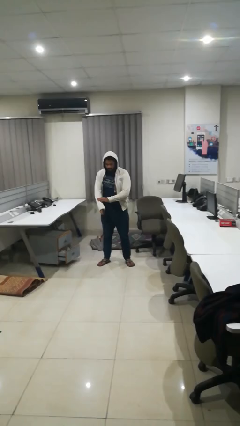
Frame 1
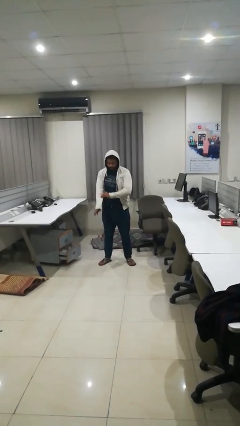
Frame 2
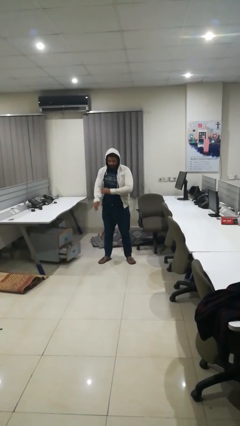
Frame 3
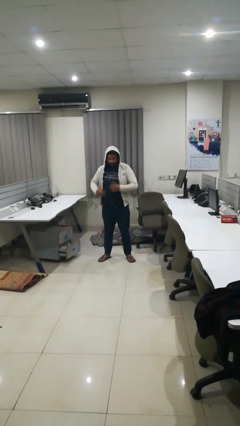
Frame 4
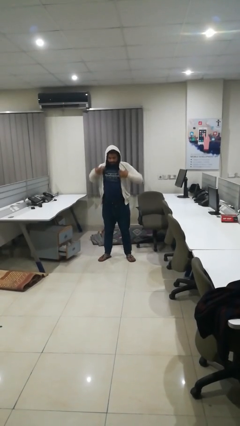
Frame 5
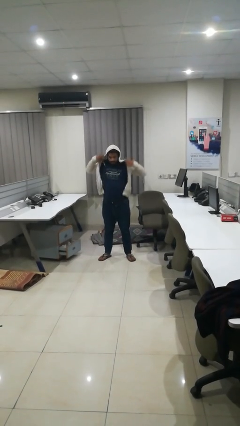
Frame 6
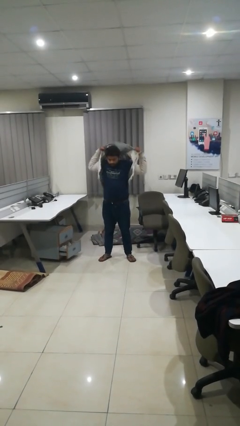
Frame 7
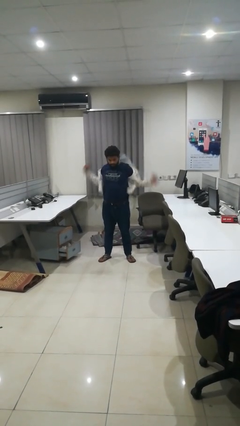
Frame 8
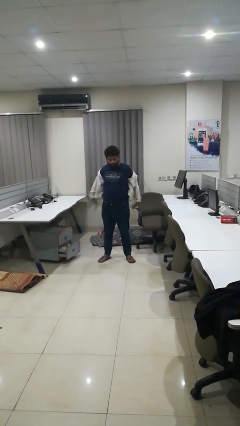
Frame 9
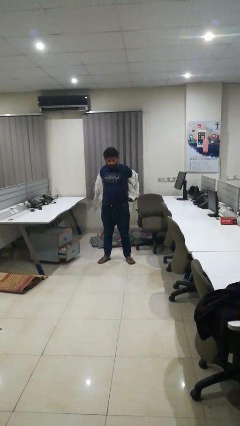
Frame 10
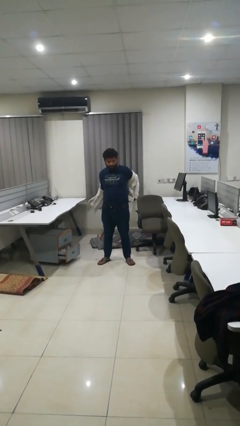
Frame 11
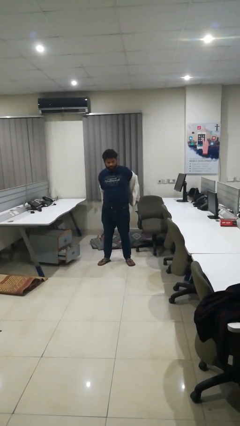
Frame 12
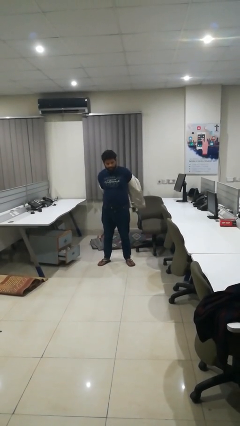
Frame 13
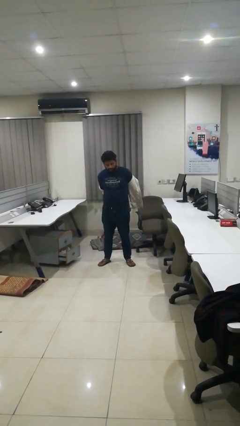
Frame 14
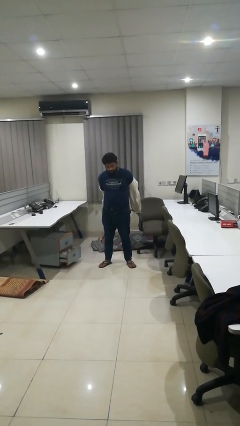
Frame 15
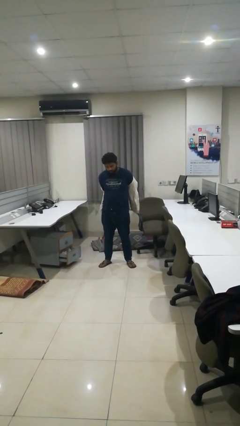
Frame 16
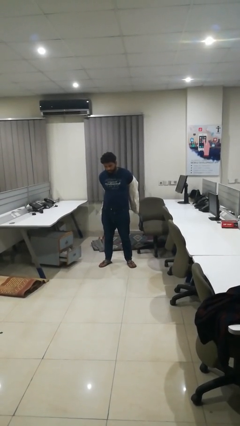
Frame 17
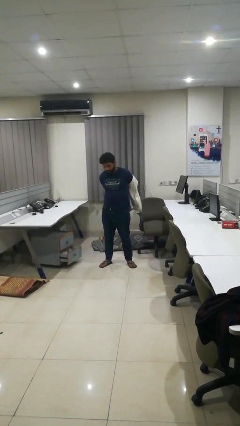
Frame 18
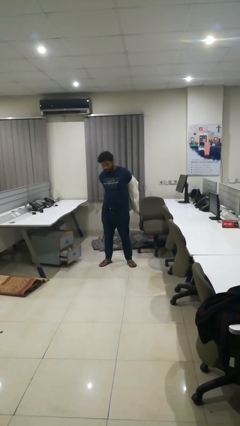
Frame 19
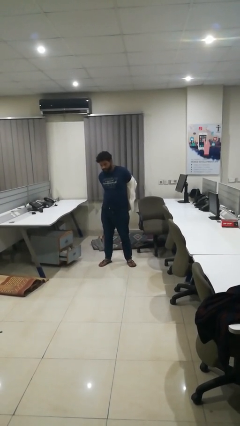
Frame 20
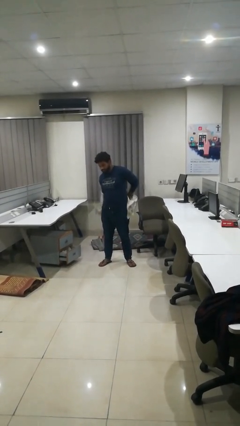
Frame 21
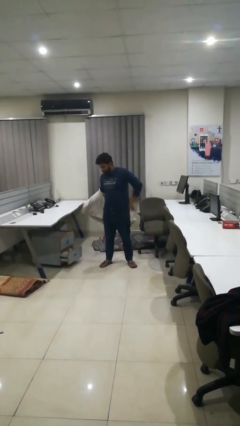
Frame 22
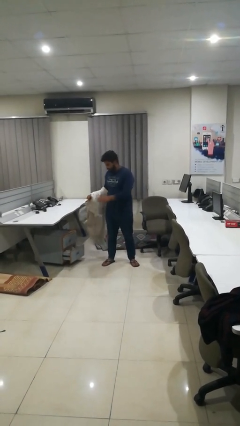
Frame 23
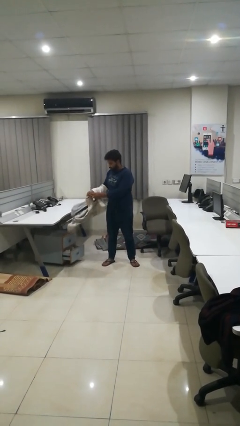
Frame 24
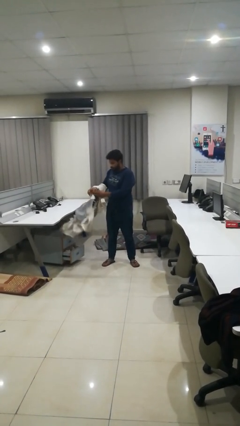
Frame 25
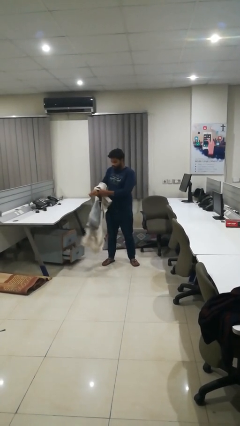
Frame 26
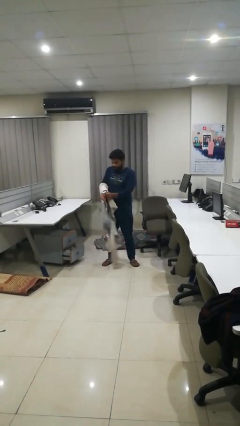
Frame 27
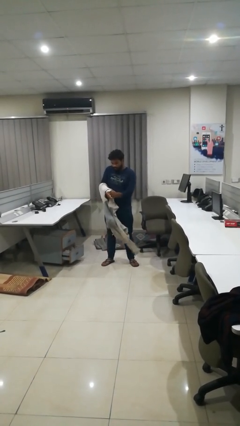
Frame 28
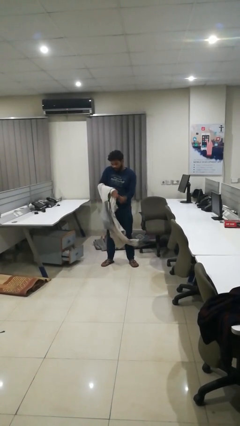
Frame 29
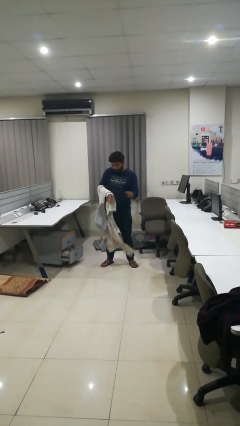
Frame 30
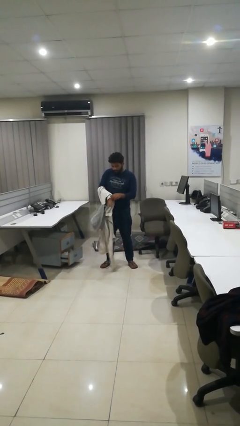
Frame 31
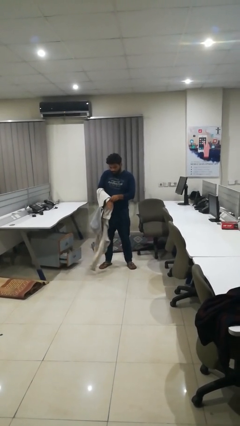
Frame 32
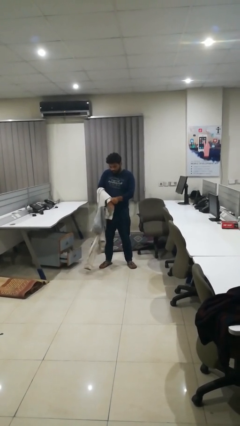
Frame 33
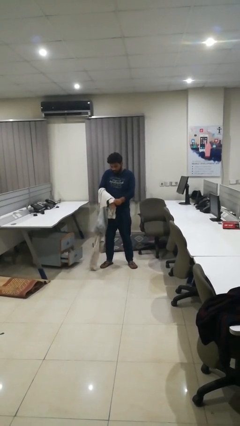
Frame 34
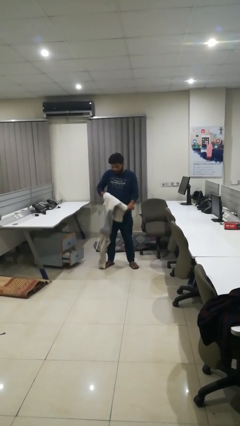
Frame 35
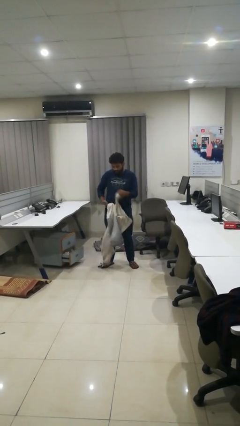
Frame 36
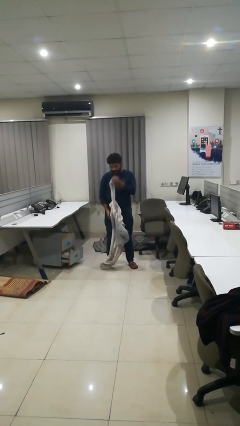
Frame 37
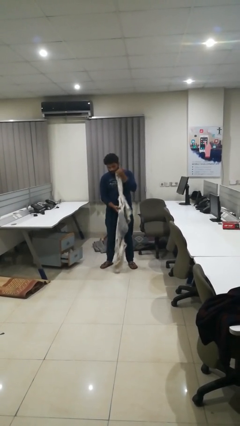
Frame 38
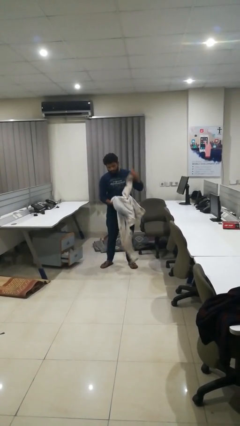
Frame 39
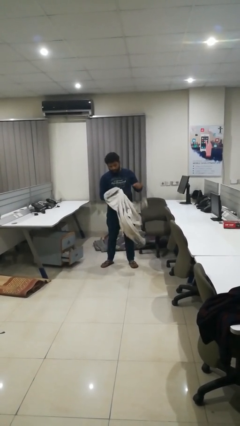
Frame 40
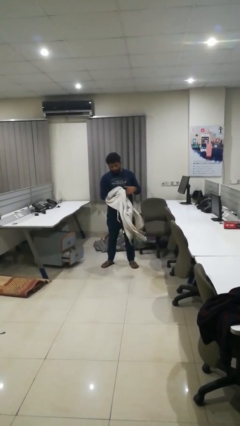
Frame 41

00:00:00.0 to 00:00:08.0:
person takes off hoodie

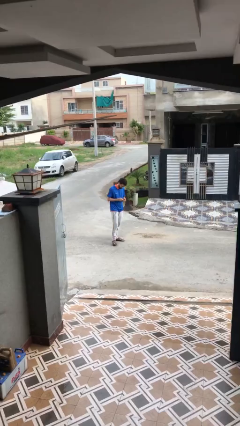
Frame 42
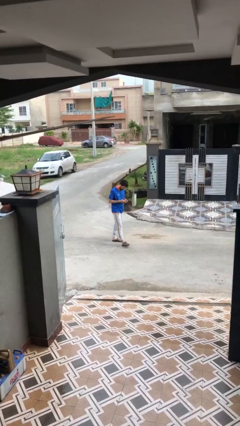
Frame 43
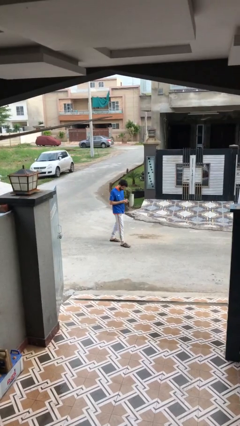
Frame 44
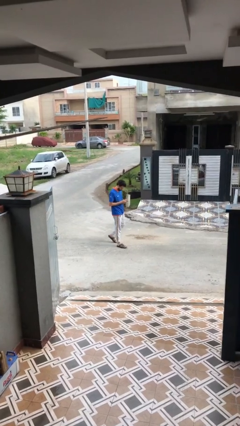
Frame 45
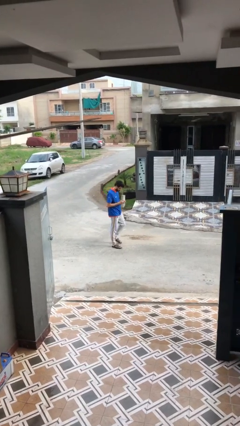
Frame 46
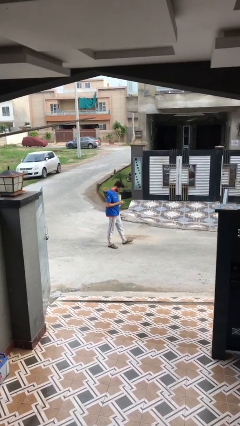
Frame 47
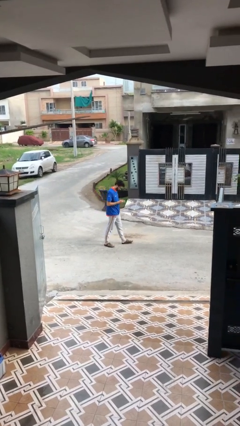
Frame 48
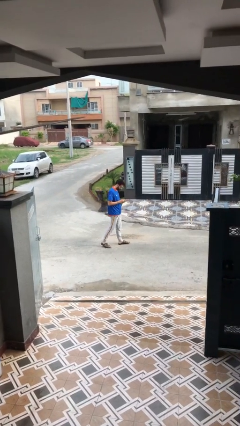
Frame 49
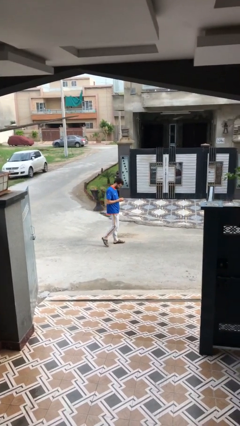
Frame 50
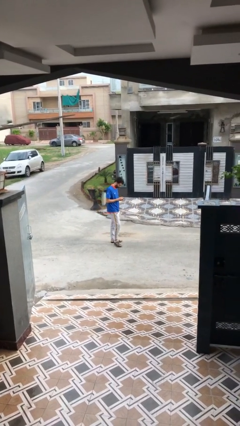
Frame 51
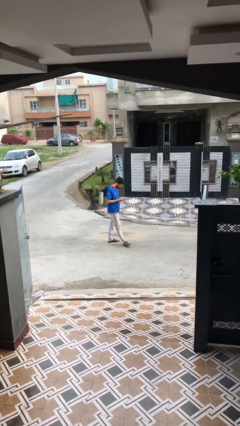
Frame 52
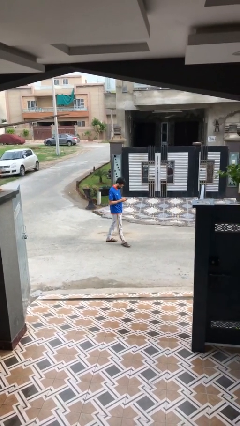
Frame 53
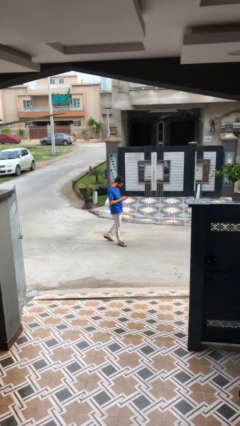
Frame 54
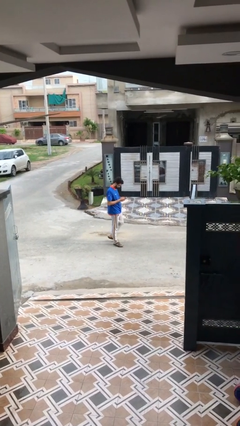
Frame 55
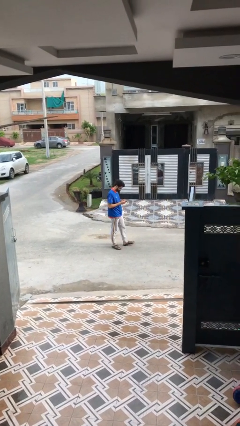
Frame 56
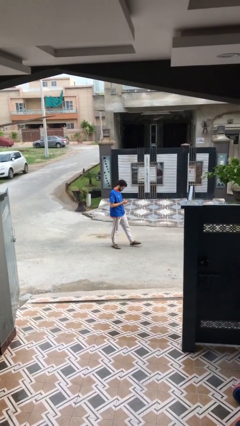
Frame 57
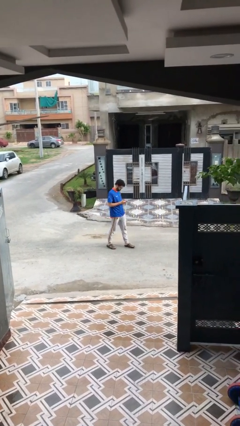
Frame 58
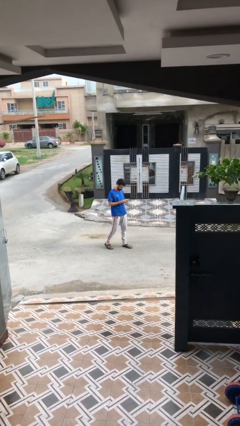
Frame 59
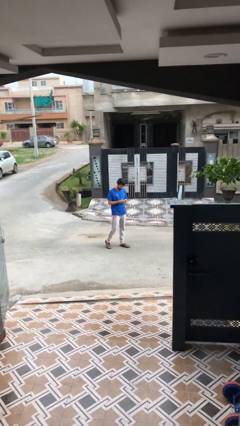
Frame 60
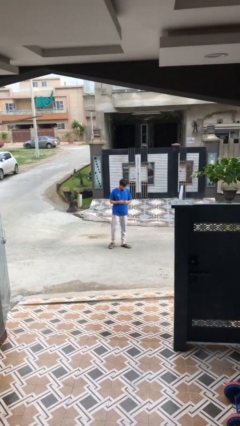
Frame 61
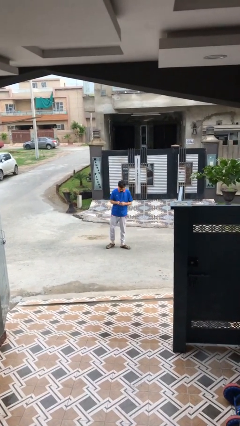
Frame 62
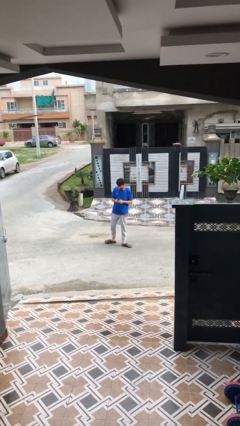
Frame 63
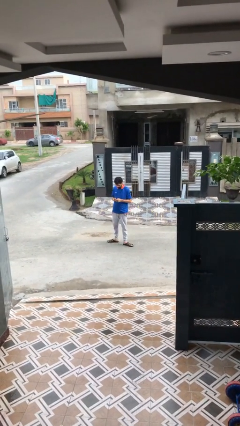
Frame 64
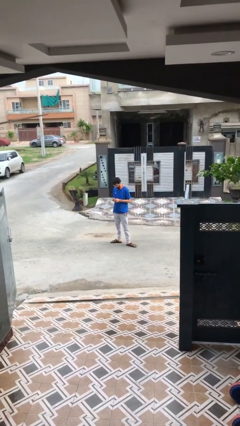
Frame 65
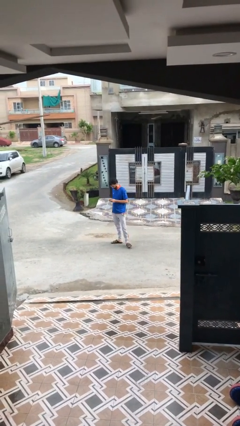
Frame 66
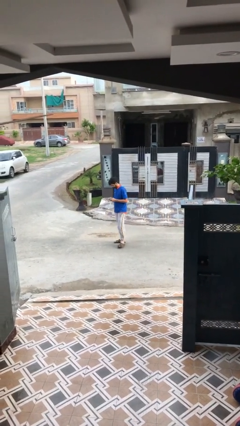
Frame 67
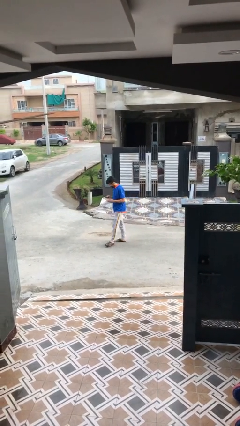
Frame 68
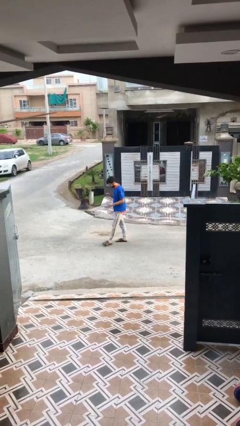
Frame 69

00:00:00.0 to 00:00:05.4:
person texts on phone

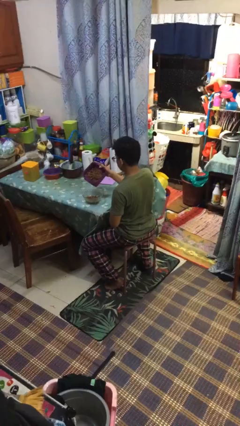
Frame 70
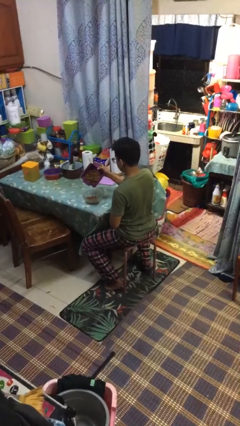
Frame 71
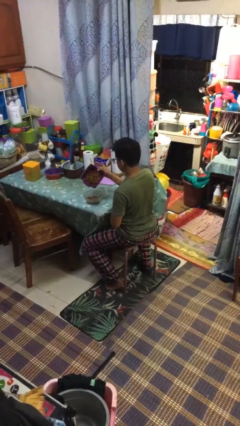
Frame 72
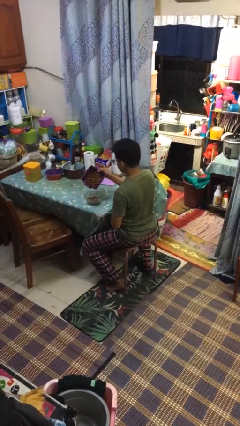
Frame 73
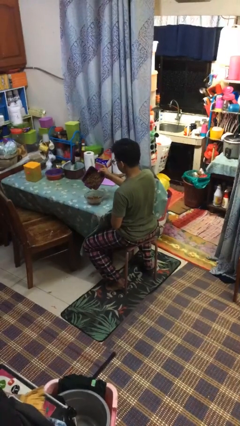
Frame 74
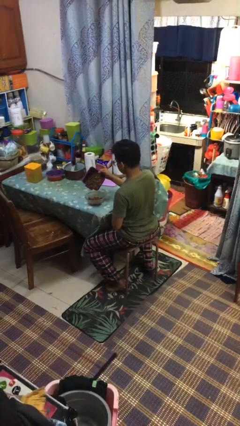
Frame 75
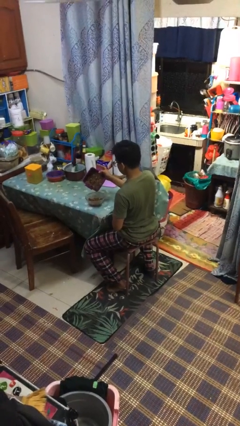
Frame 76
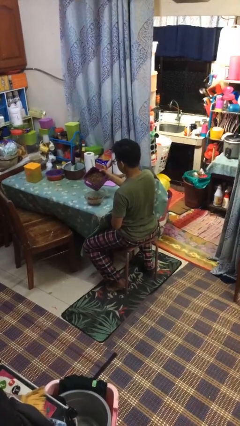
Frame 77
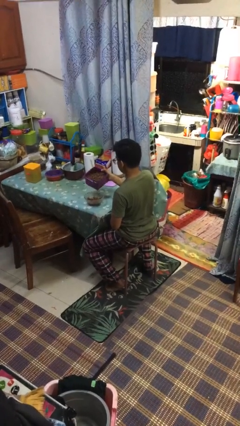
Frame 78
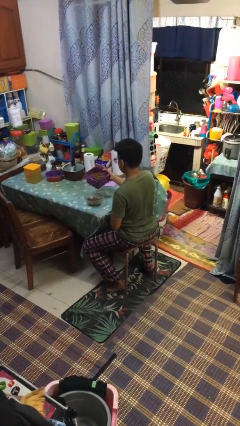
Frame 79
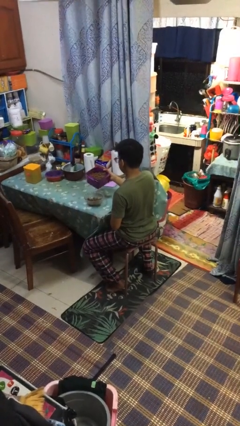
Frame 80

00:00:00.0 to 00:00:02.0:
person pours into bowl

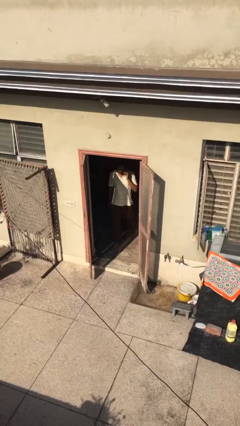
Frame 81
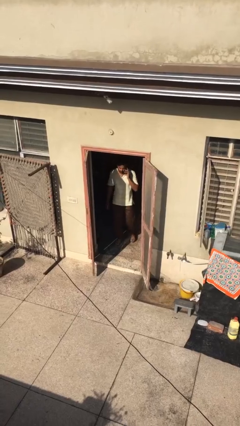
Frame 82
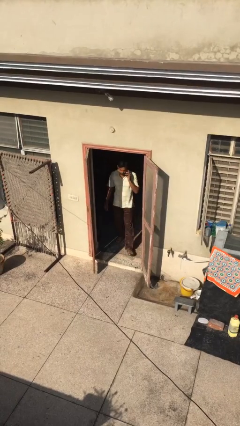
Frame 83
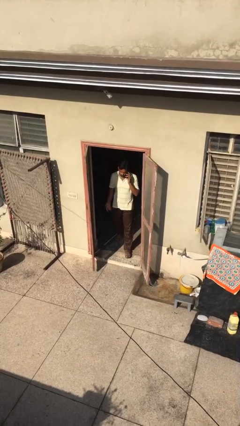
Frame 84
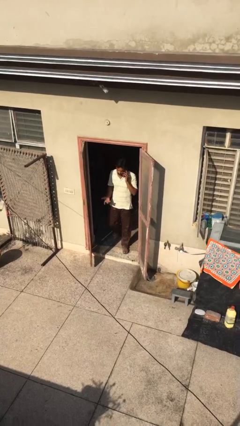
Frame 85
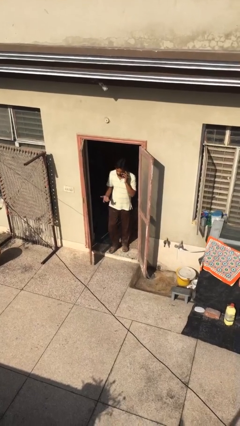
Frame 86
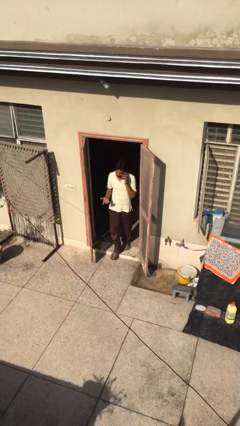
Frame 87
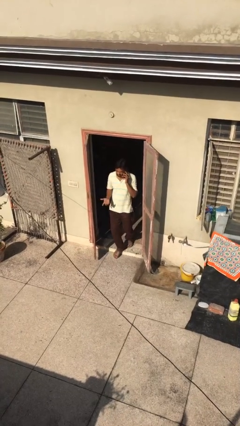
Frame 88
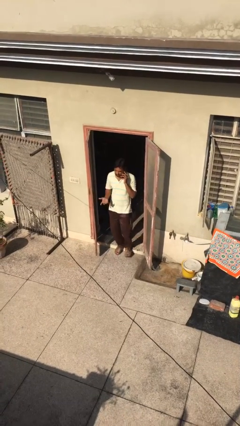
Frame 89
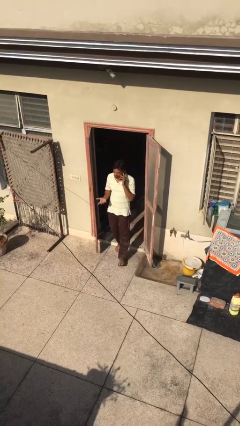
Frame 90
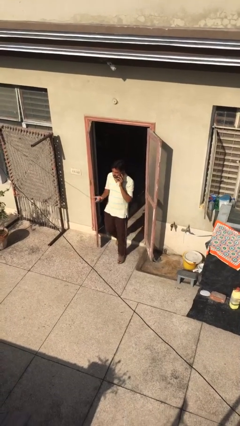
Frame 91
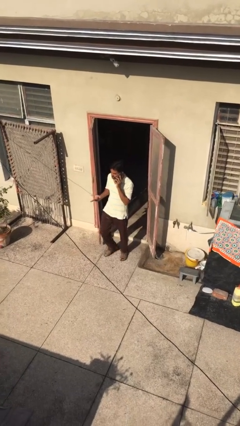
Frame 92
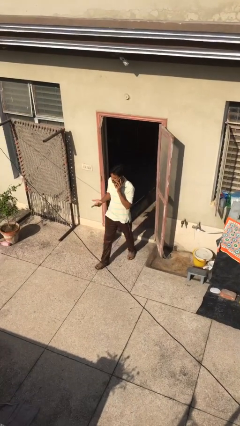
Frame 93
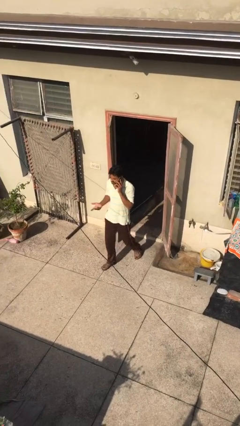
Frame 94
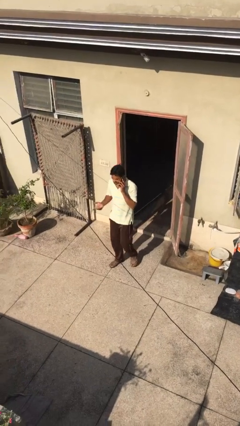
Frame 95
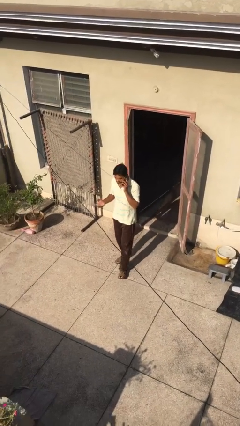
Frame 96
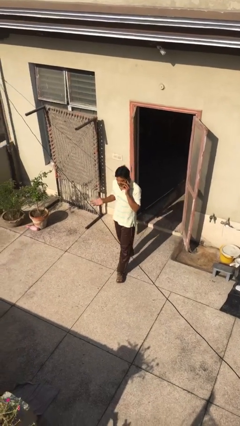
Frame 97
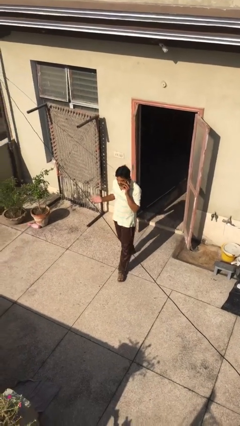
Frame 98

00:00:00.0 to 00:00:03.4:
person enters scene through structure
